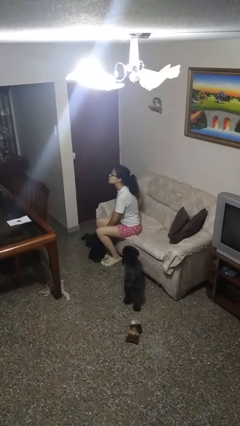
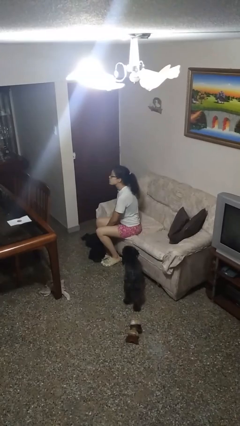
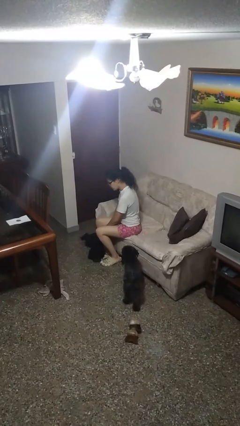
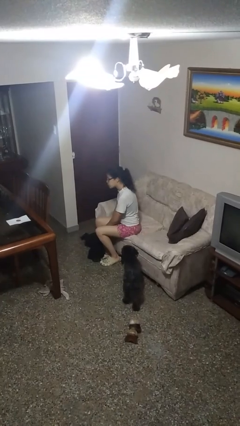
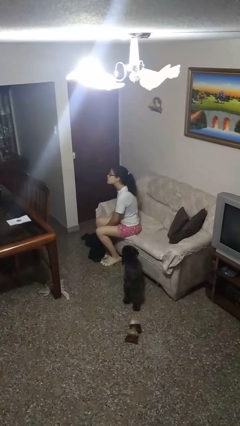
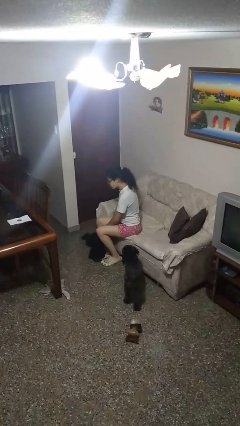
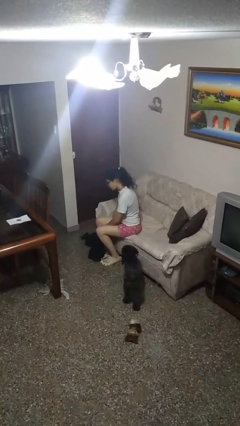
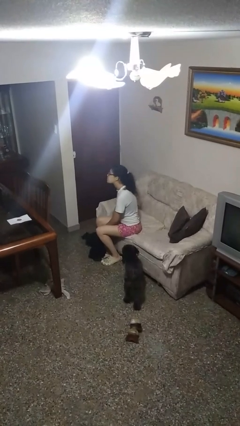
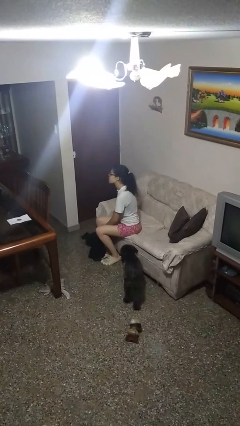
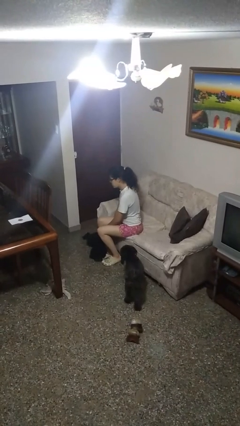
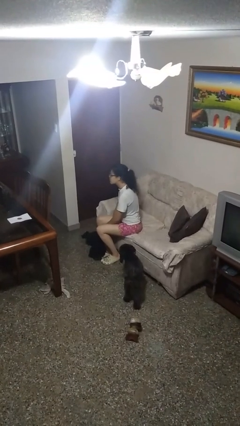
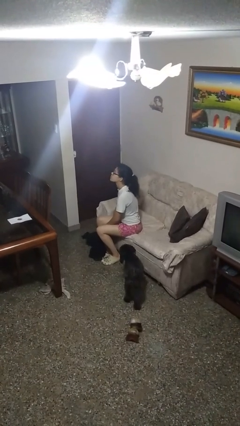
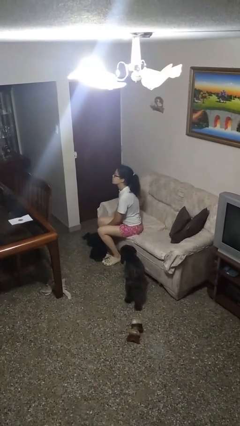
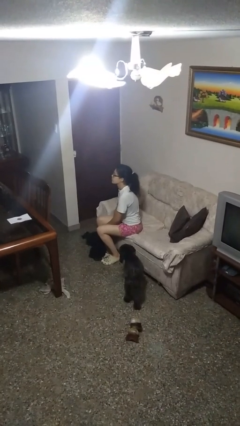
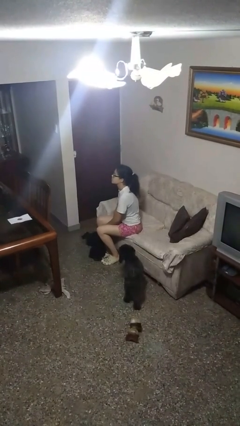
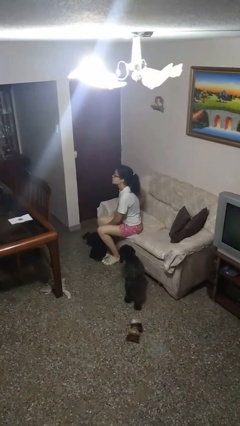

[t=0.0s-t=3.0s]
person nods head

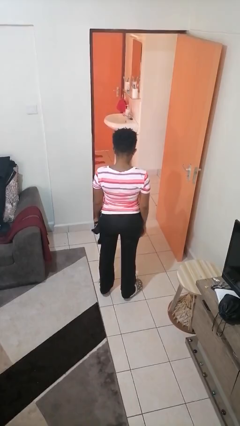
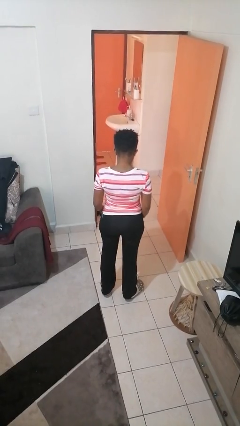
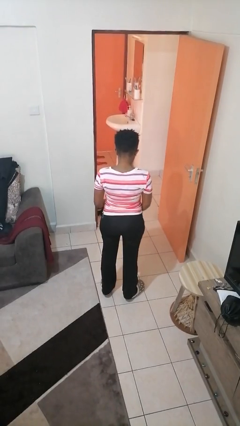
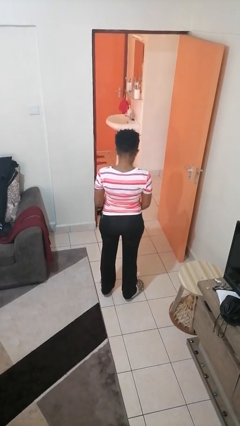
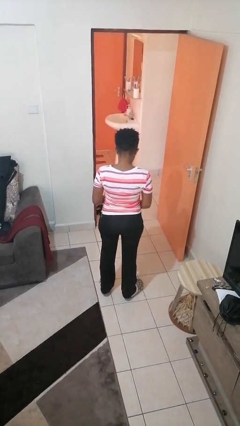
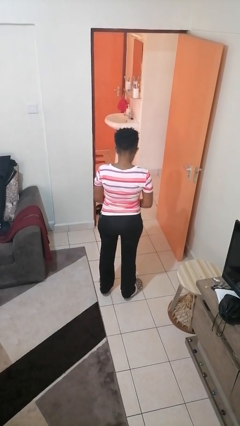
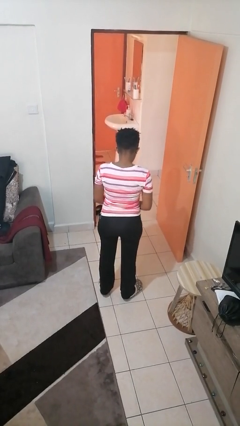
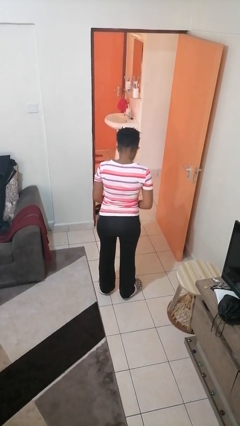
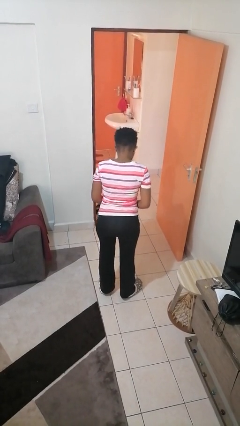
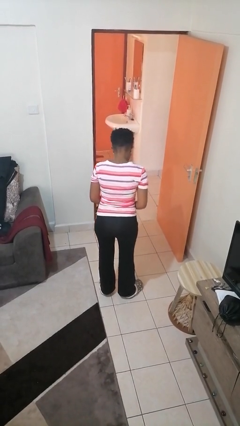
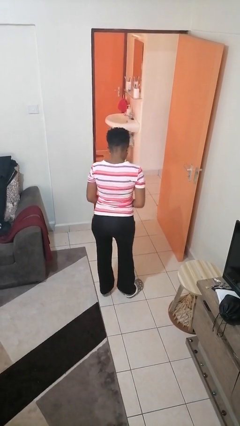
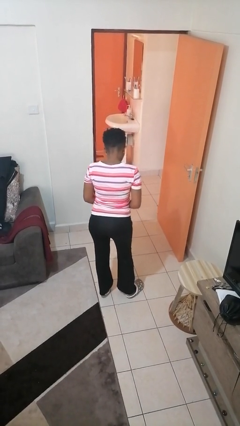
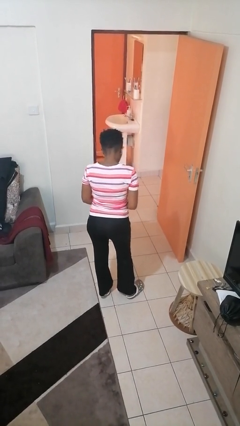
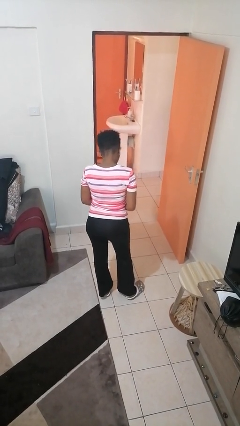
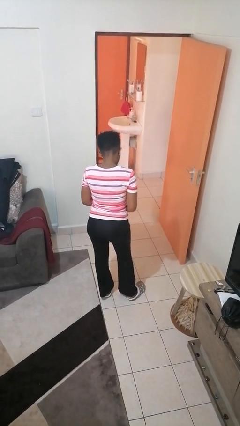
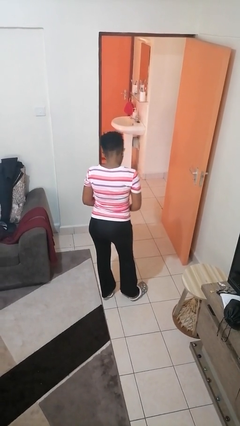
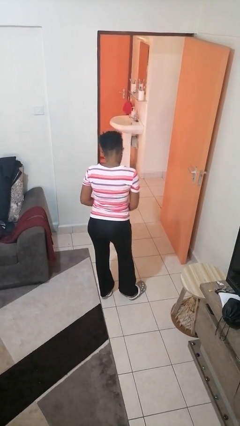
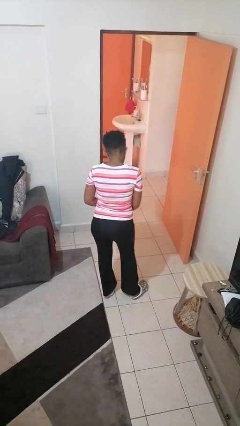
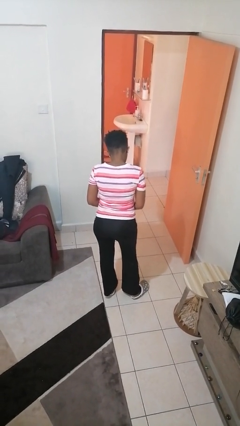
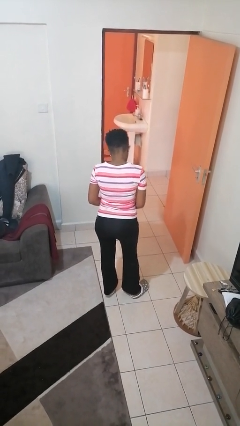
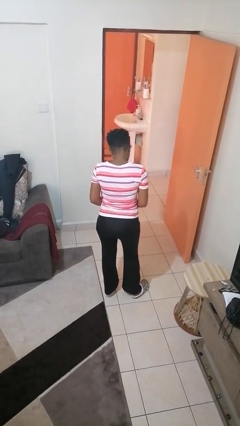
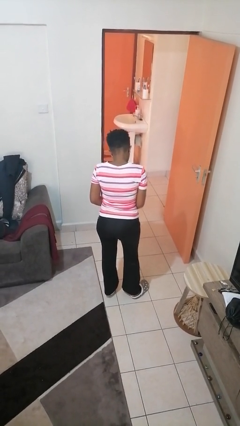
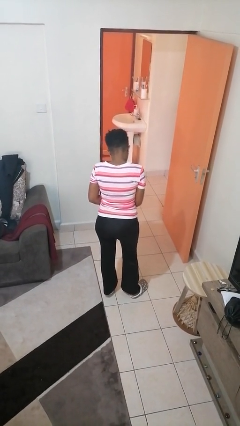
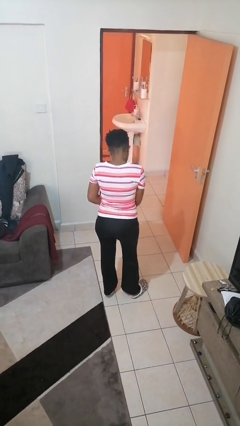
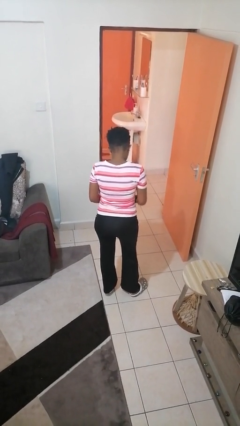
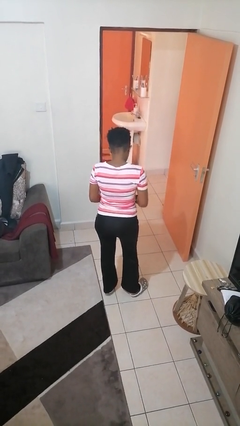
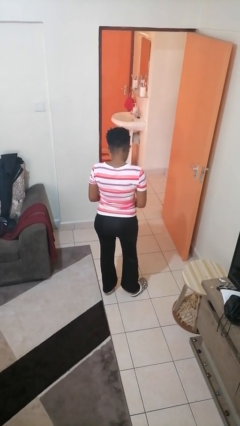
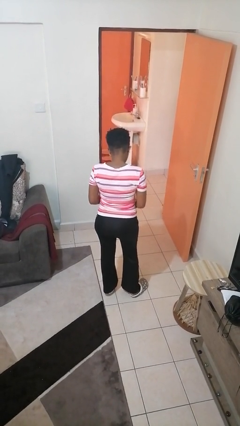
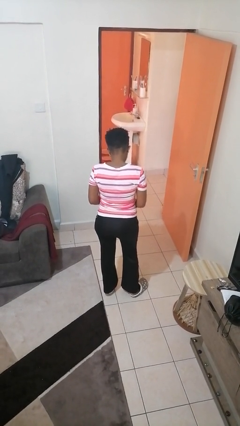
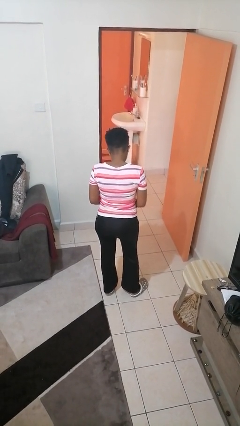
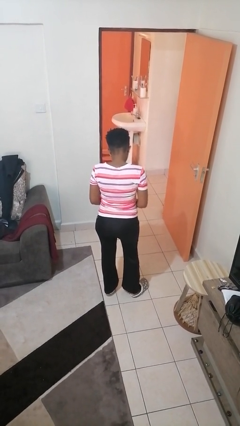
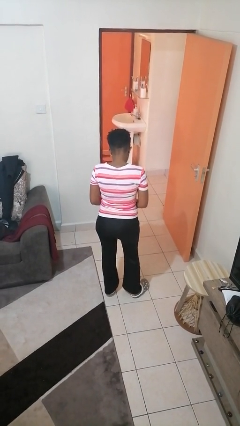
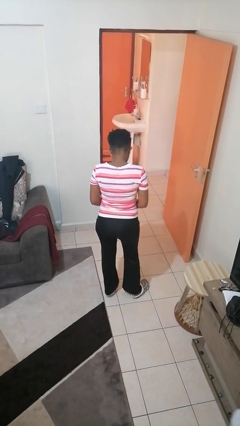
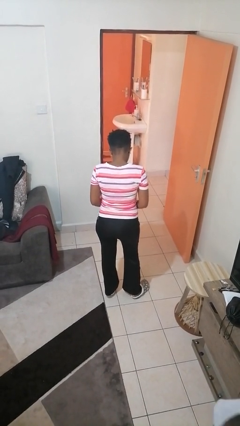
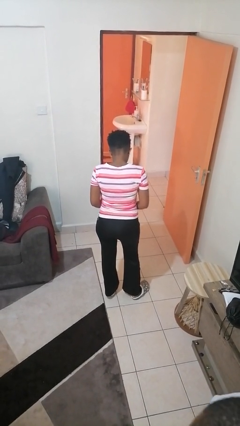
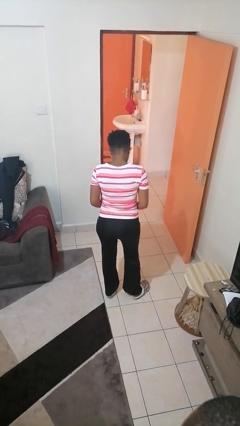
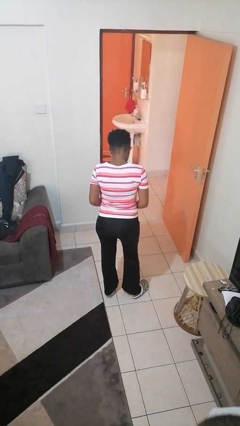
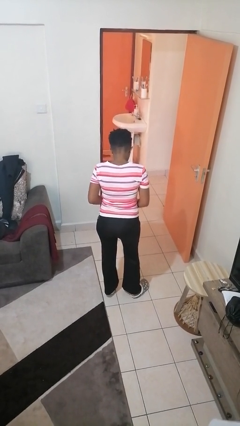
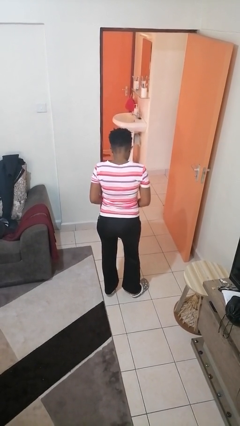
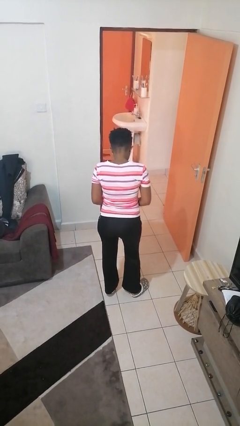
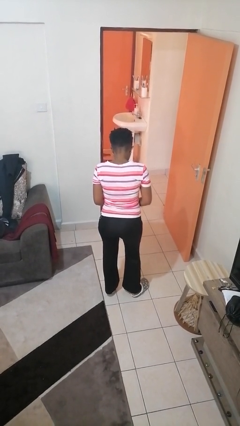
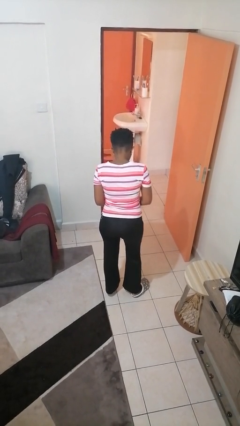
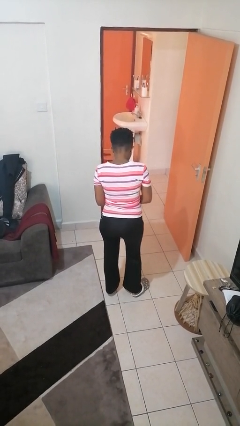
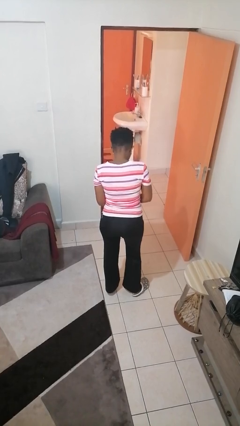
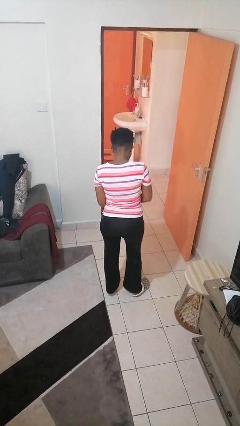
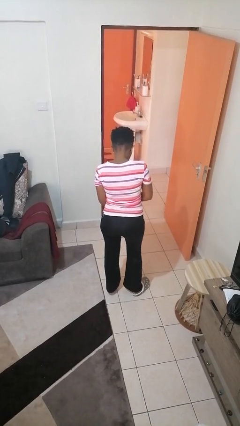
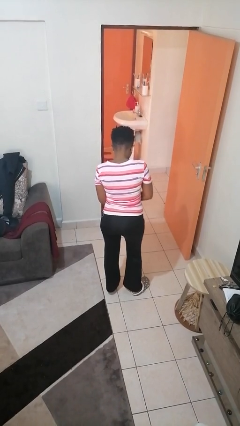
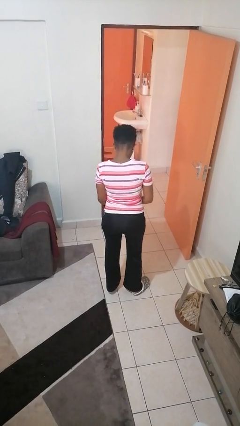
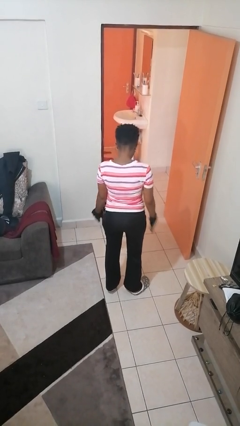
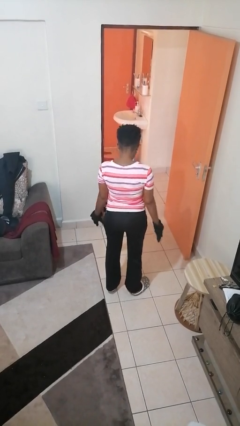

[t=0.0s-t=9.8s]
person puts on gloves

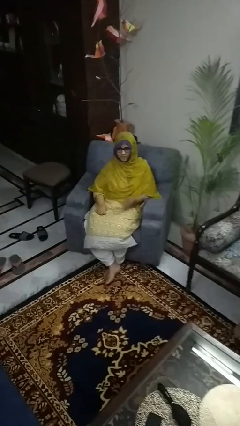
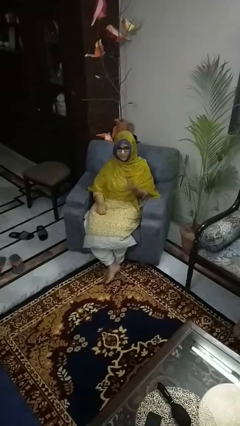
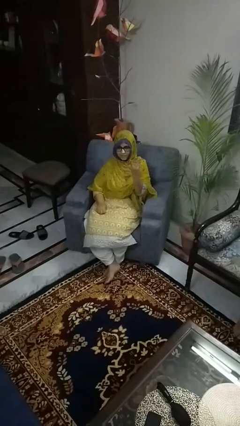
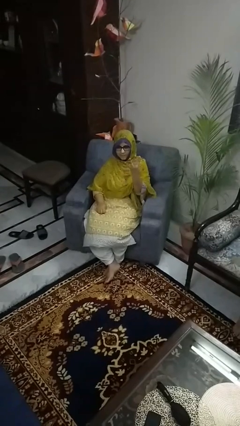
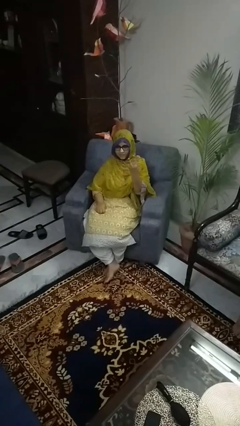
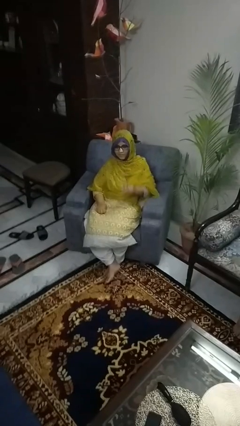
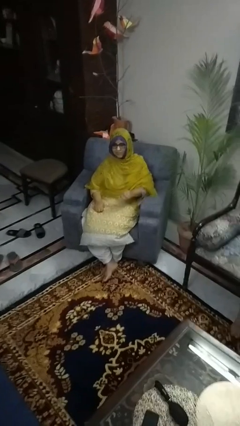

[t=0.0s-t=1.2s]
person gestures number four

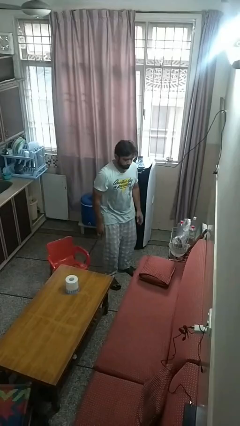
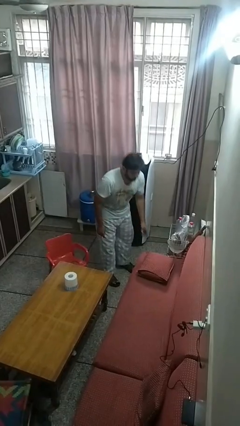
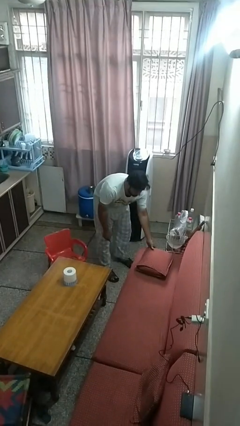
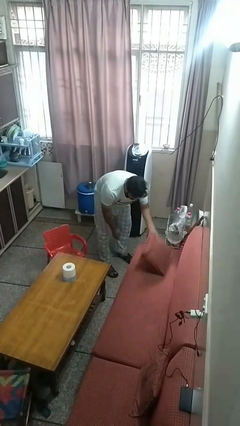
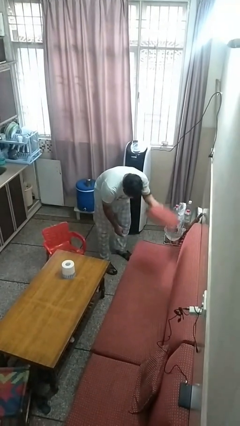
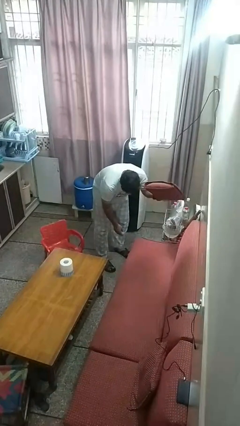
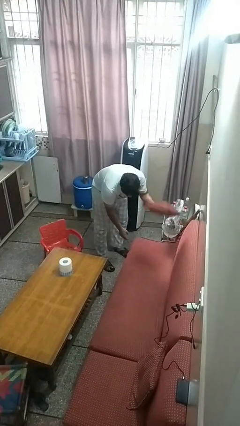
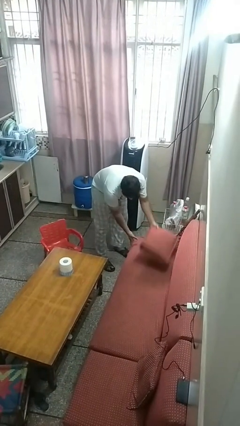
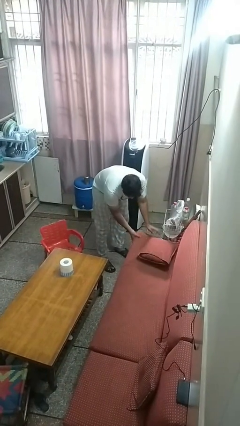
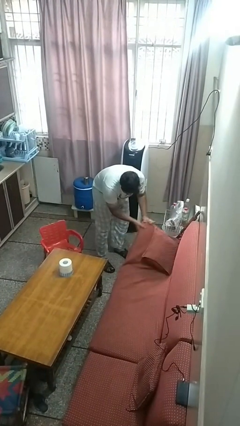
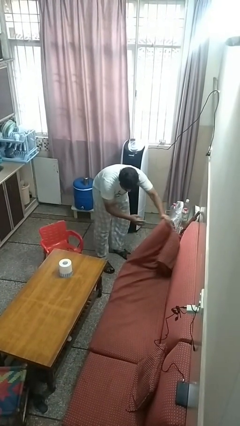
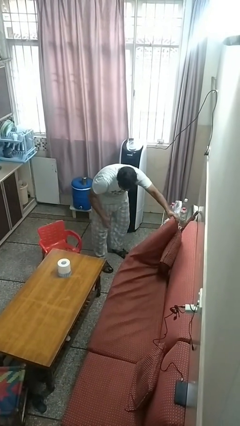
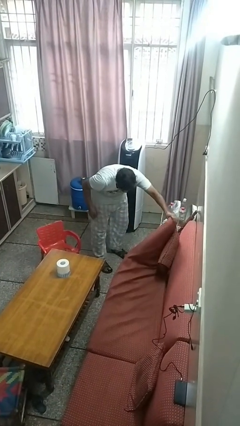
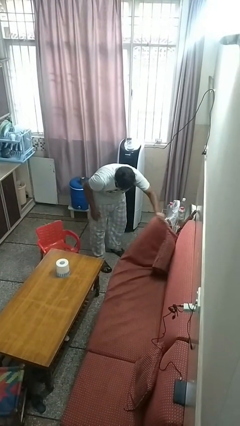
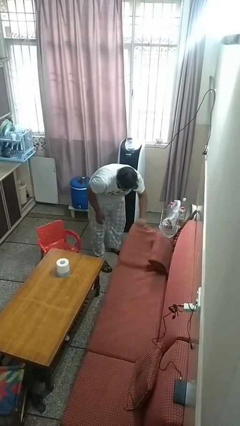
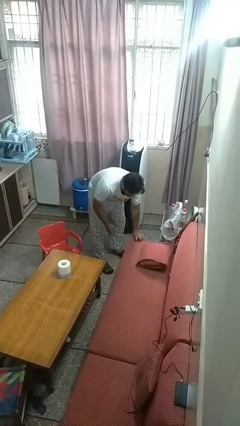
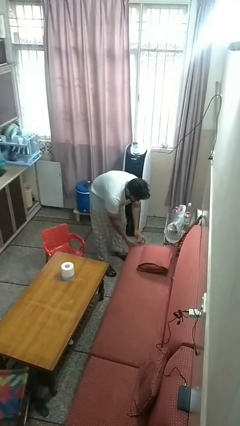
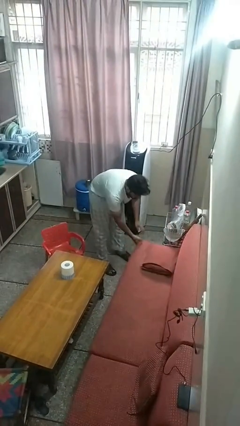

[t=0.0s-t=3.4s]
person searches under couch

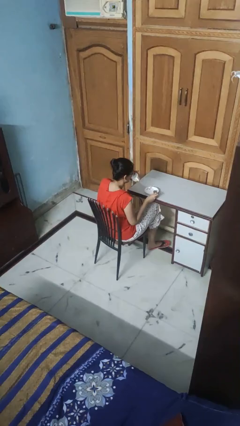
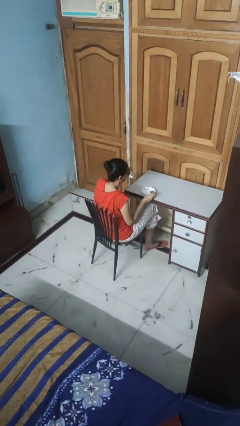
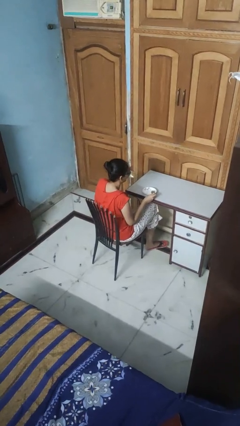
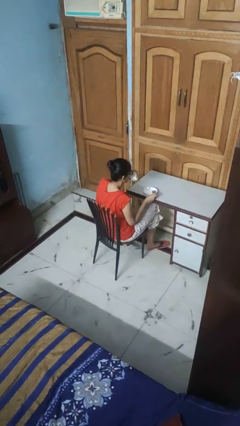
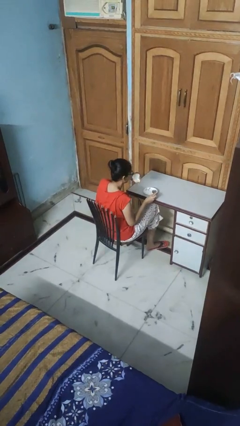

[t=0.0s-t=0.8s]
person drinks from mug
